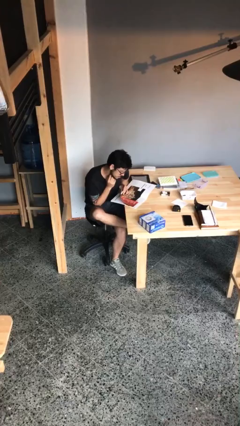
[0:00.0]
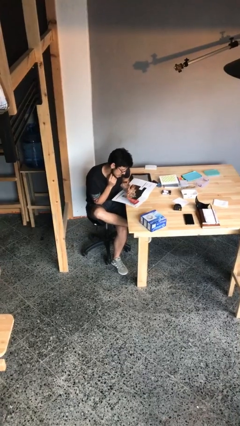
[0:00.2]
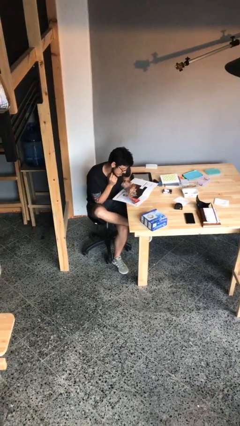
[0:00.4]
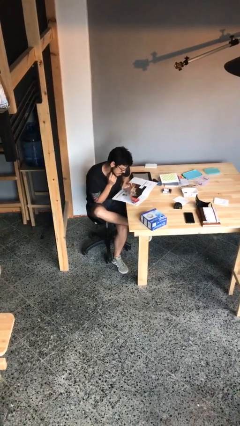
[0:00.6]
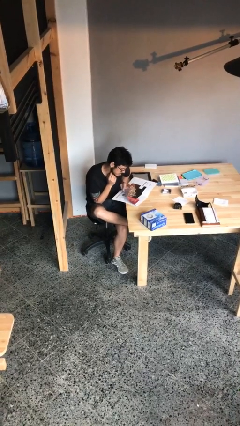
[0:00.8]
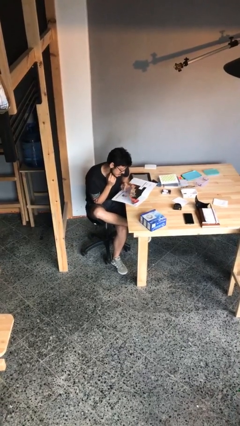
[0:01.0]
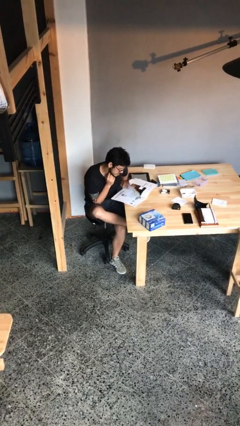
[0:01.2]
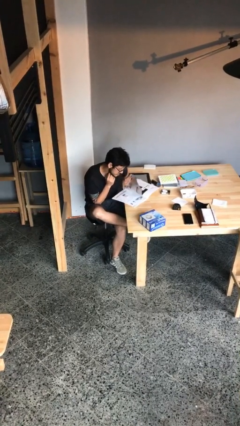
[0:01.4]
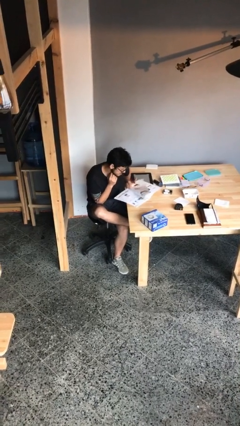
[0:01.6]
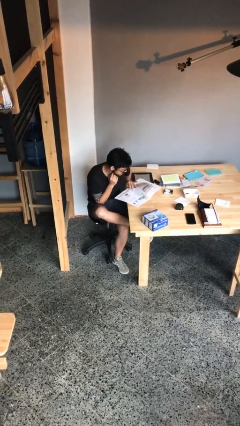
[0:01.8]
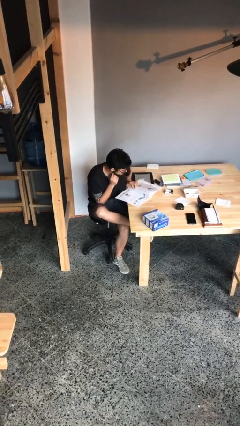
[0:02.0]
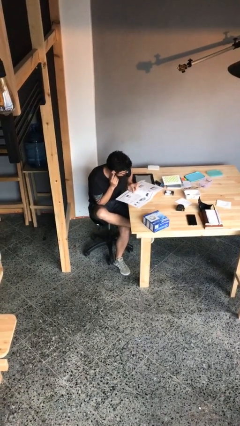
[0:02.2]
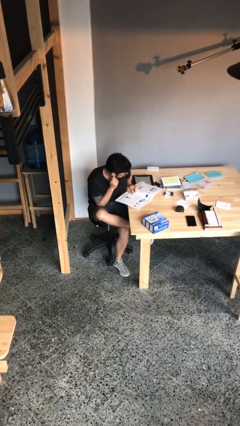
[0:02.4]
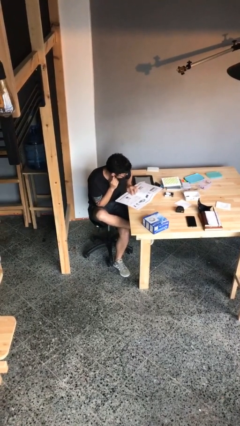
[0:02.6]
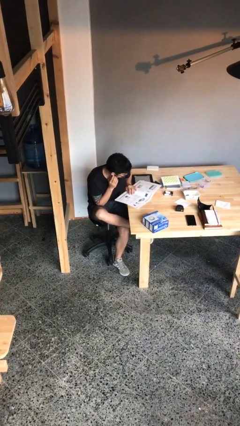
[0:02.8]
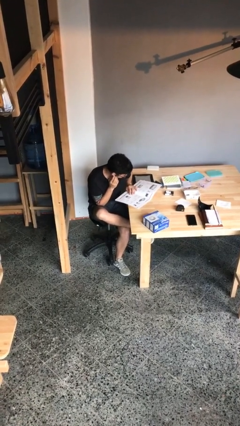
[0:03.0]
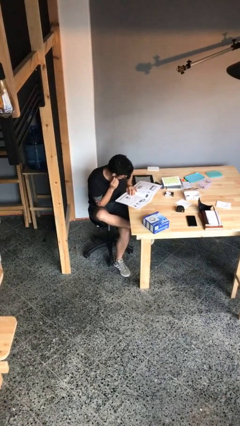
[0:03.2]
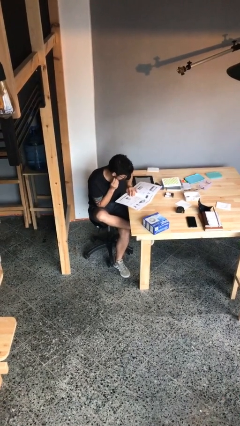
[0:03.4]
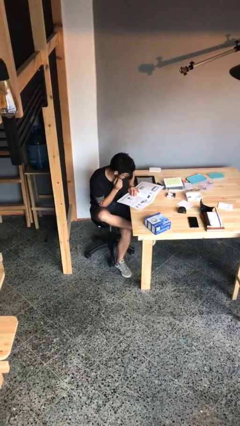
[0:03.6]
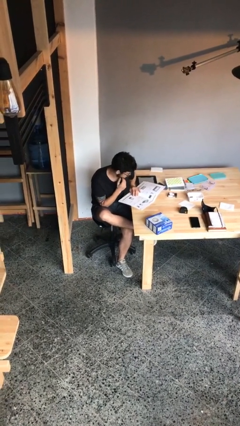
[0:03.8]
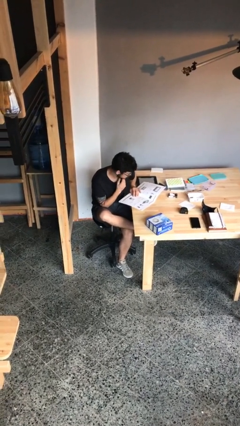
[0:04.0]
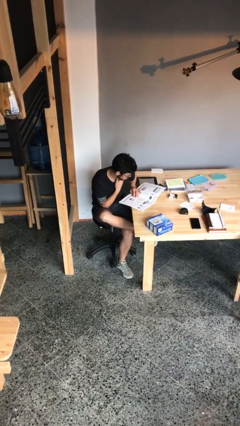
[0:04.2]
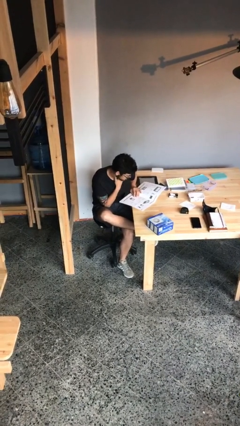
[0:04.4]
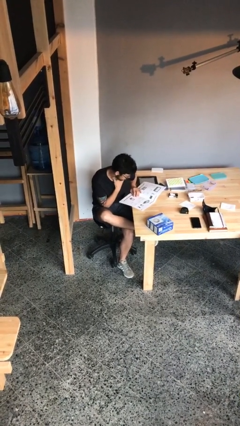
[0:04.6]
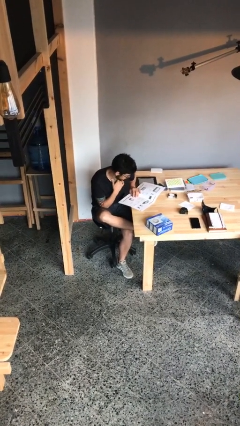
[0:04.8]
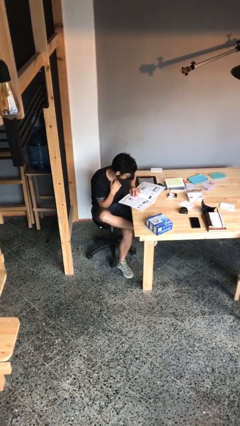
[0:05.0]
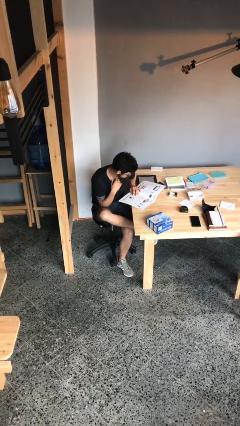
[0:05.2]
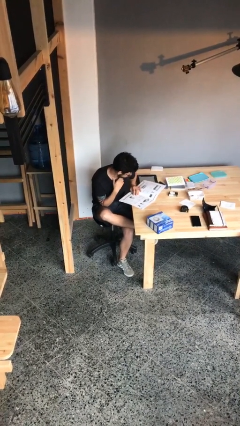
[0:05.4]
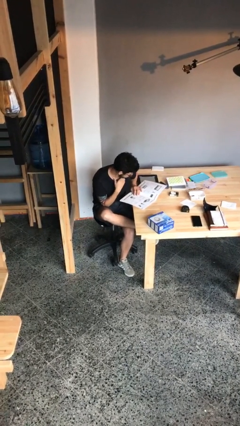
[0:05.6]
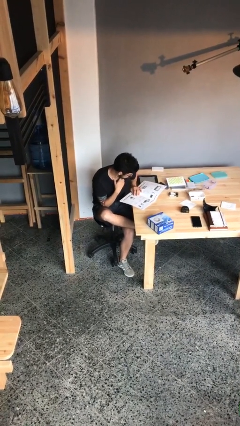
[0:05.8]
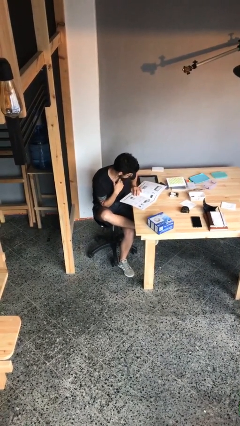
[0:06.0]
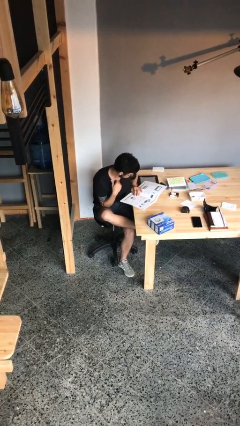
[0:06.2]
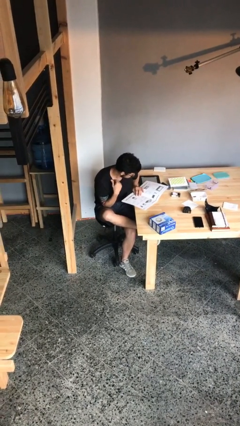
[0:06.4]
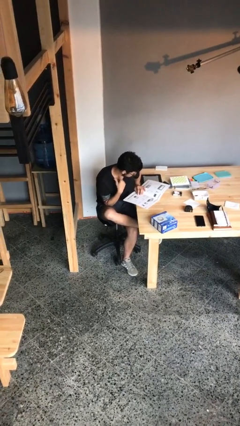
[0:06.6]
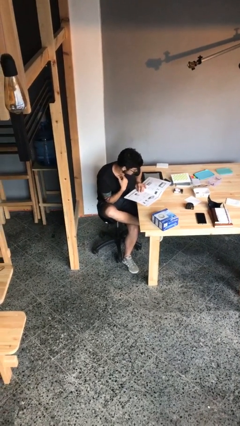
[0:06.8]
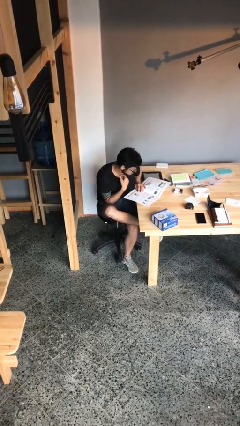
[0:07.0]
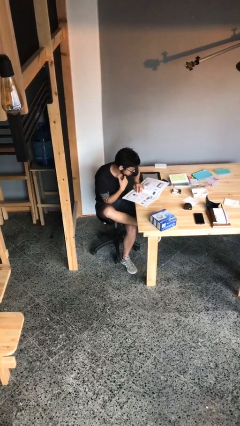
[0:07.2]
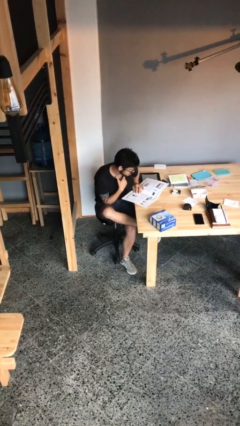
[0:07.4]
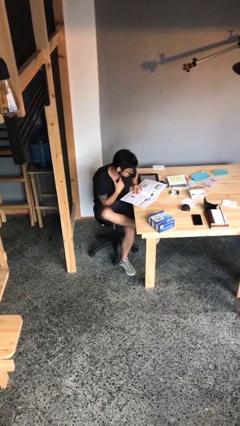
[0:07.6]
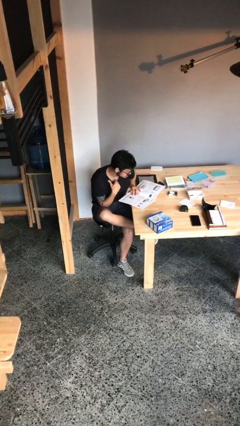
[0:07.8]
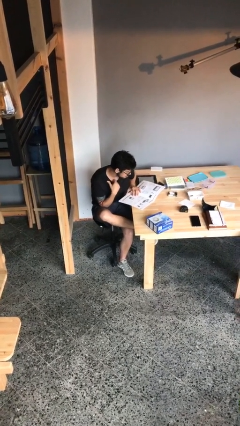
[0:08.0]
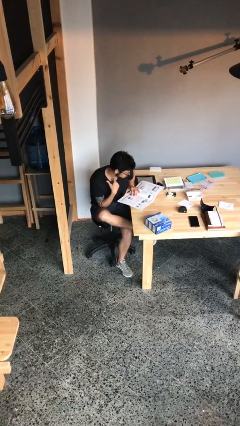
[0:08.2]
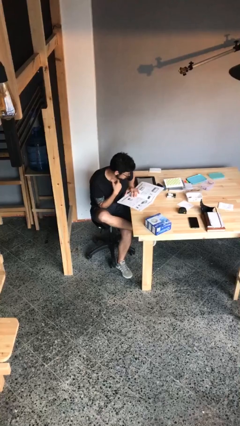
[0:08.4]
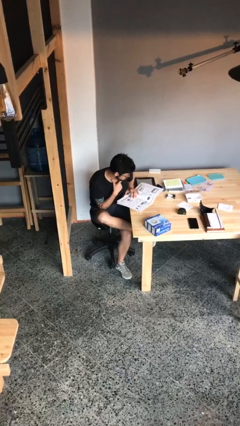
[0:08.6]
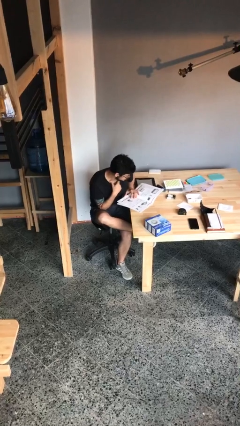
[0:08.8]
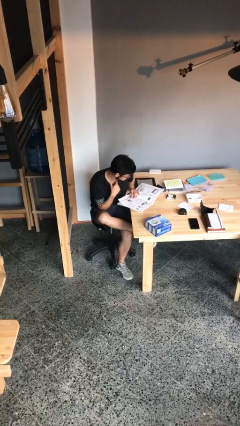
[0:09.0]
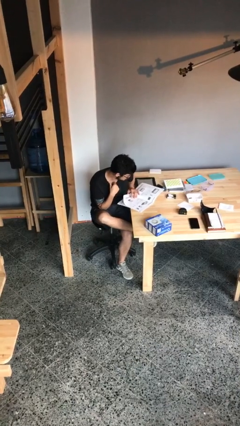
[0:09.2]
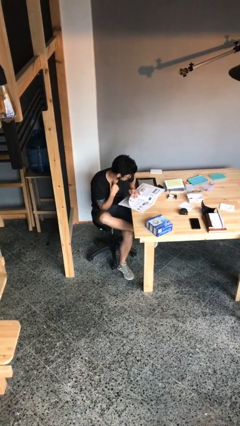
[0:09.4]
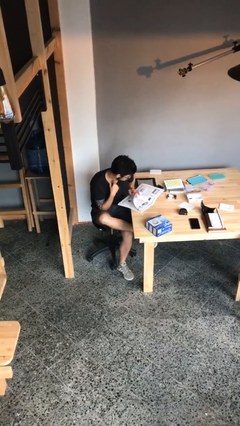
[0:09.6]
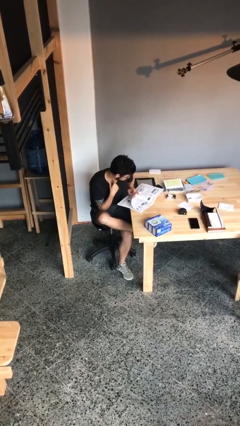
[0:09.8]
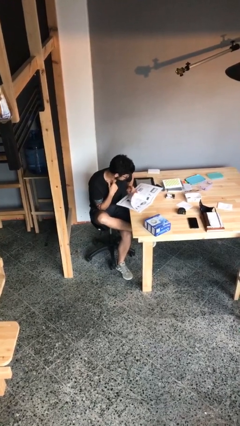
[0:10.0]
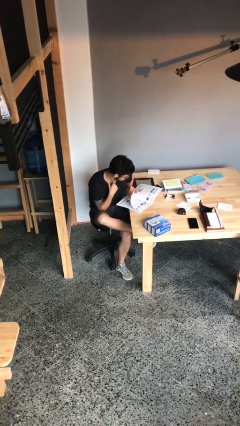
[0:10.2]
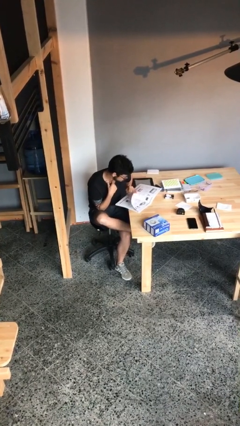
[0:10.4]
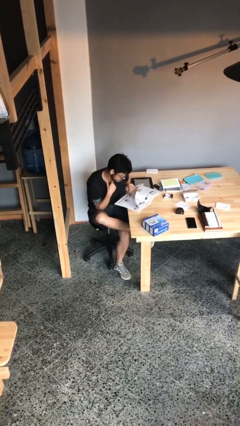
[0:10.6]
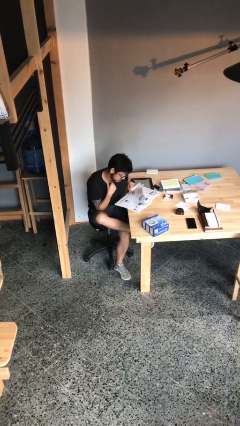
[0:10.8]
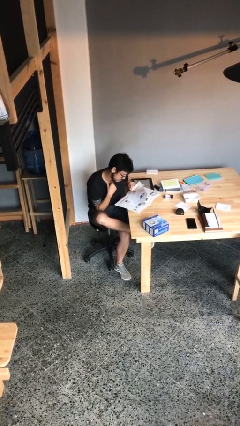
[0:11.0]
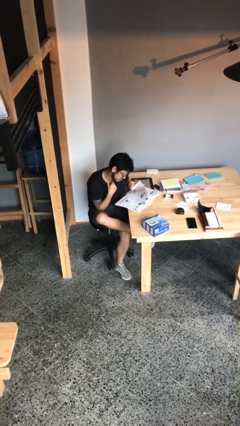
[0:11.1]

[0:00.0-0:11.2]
person reads document

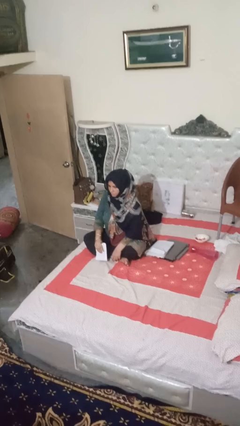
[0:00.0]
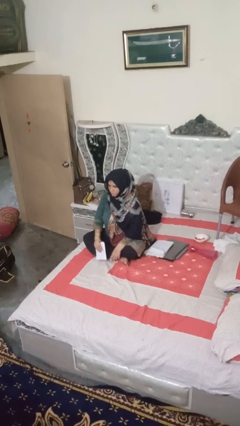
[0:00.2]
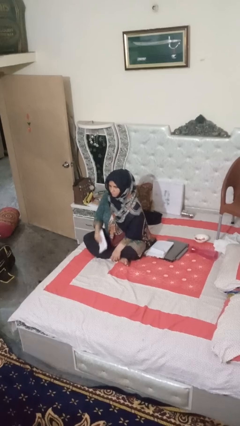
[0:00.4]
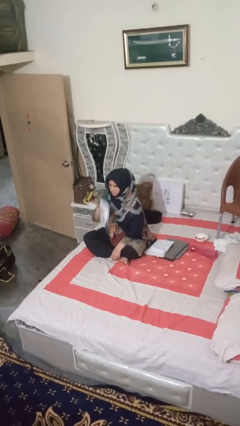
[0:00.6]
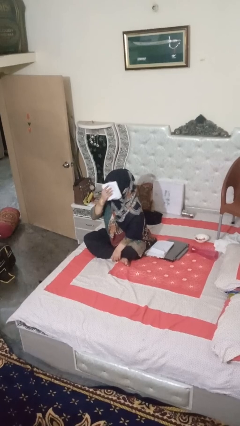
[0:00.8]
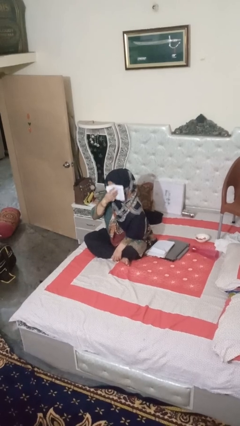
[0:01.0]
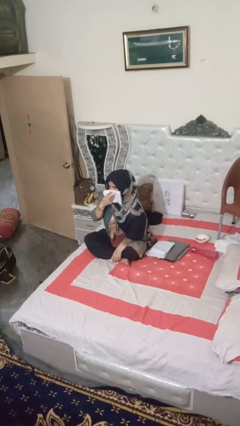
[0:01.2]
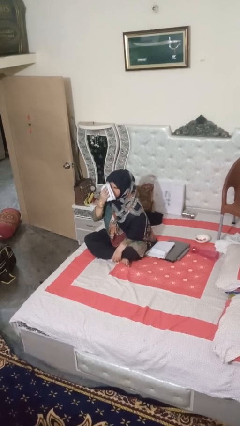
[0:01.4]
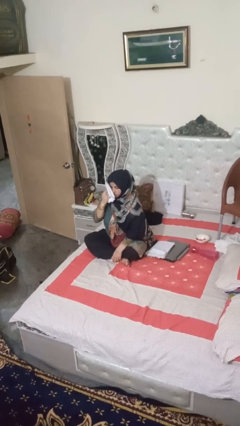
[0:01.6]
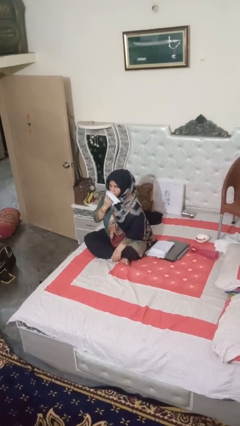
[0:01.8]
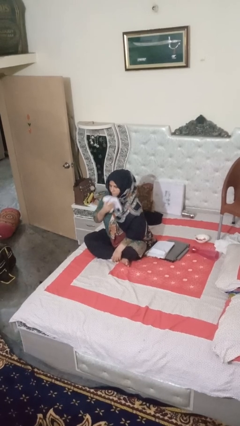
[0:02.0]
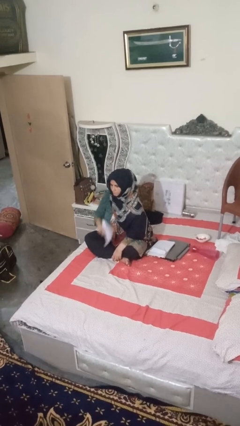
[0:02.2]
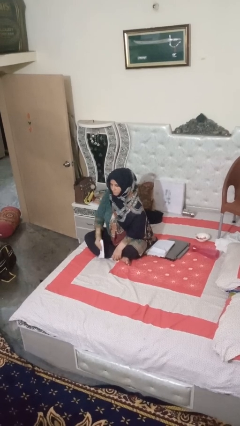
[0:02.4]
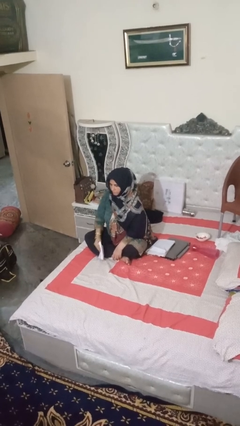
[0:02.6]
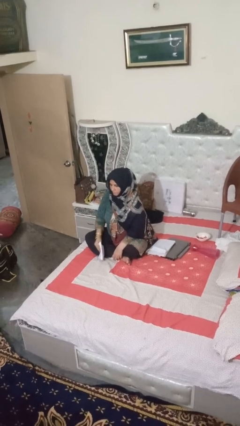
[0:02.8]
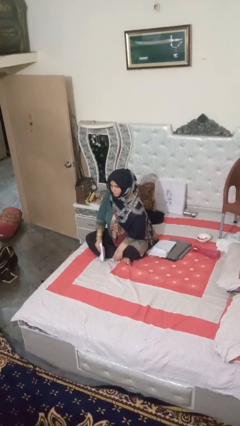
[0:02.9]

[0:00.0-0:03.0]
person wipes mouth with napkin

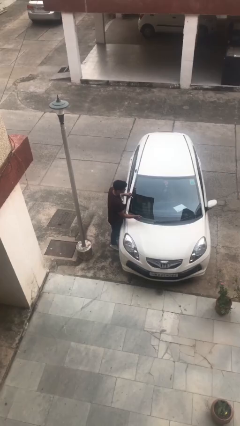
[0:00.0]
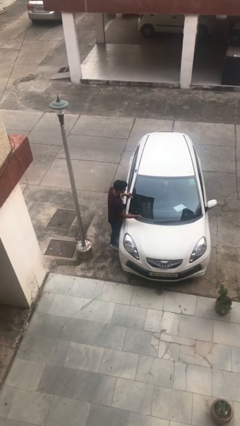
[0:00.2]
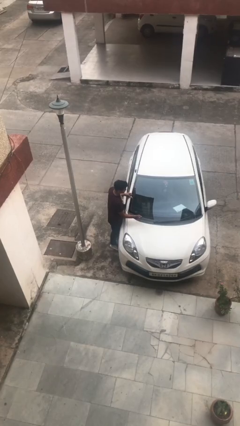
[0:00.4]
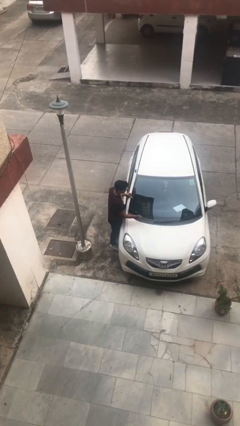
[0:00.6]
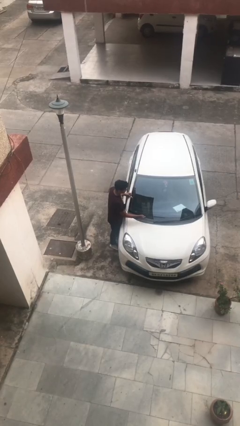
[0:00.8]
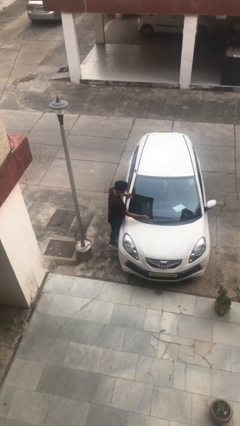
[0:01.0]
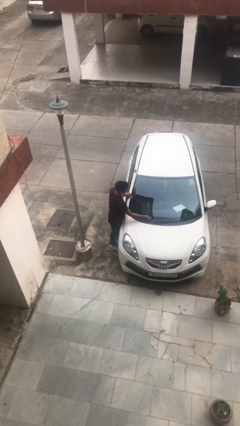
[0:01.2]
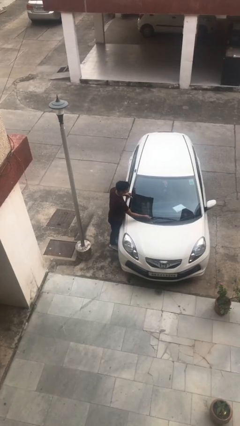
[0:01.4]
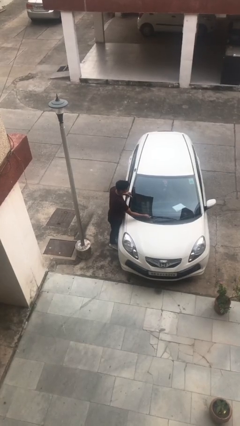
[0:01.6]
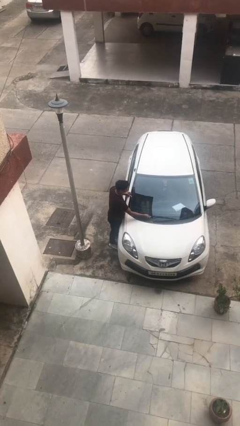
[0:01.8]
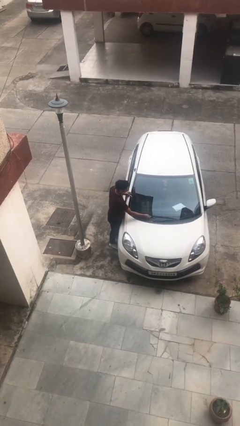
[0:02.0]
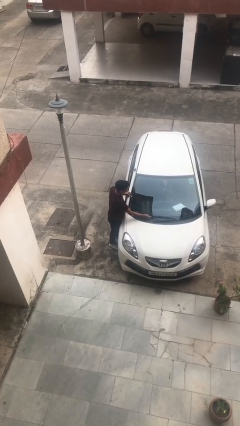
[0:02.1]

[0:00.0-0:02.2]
person flips down car wipers

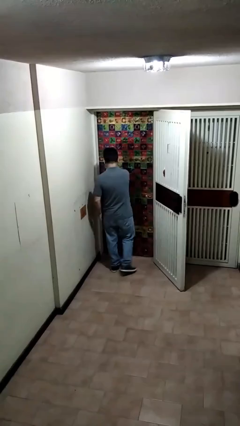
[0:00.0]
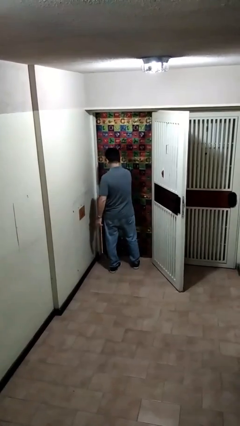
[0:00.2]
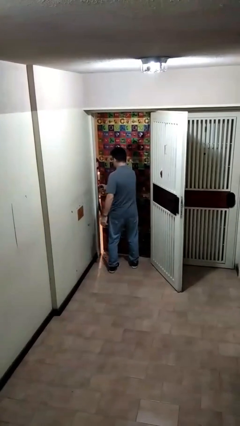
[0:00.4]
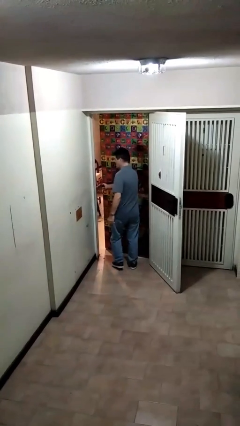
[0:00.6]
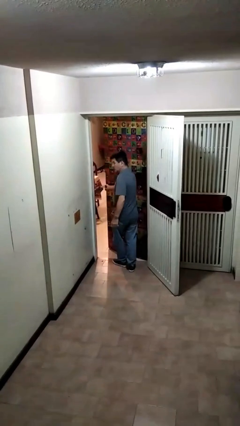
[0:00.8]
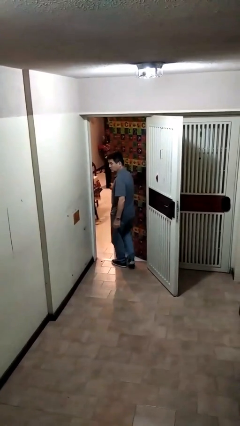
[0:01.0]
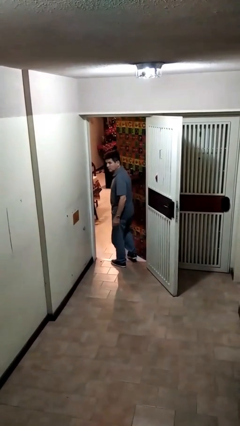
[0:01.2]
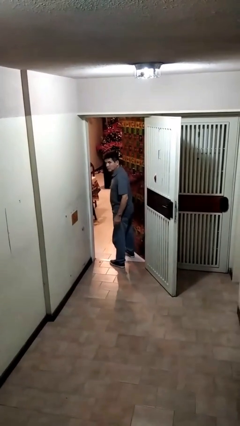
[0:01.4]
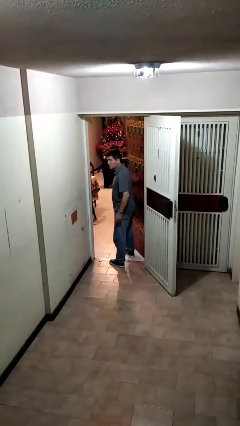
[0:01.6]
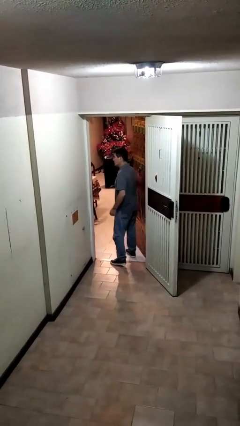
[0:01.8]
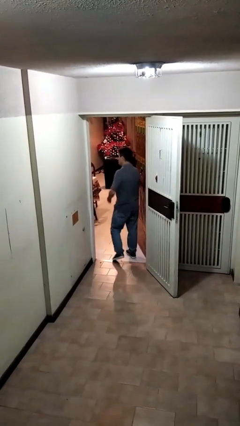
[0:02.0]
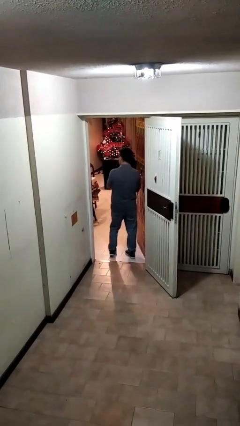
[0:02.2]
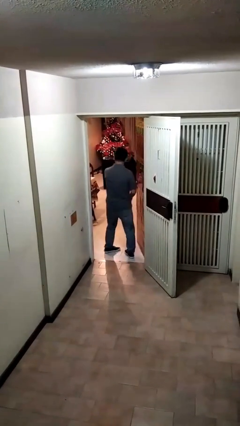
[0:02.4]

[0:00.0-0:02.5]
person opens facility door
